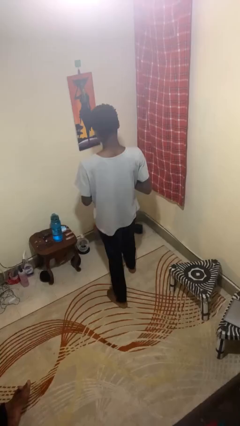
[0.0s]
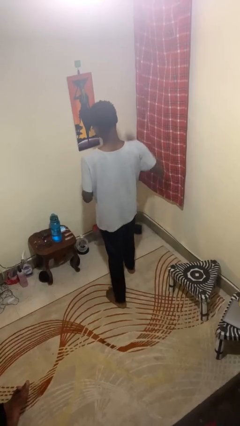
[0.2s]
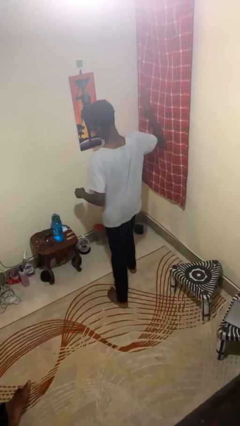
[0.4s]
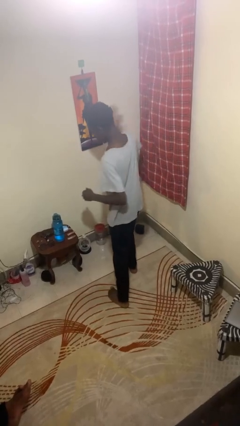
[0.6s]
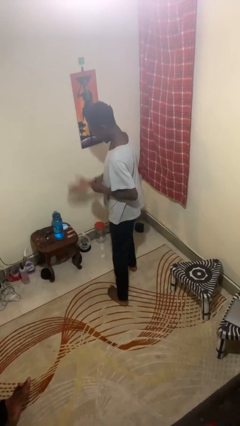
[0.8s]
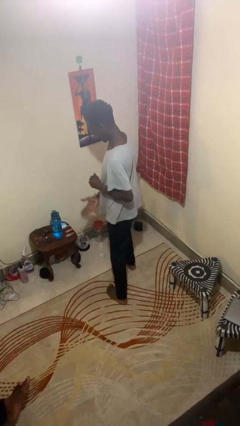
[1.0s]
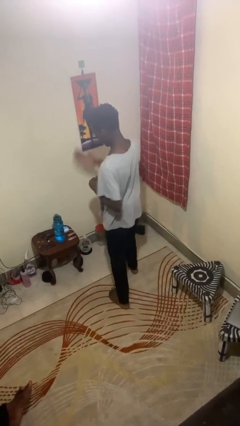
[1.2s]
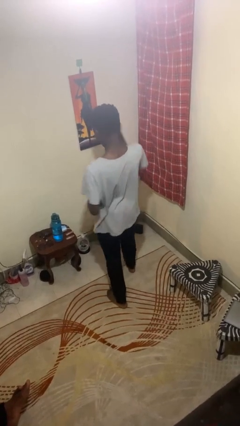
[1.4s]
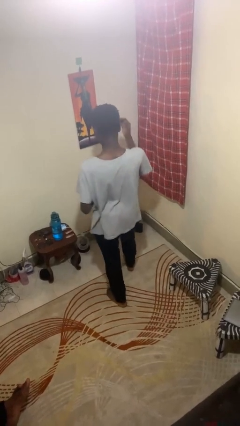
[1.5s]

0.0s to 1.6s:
person karate chop

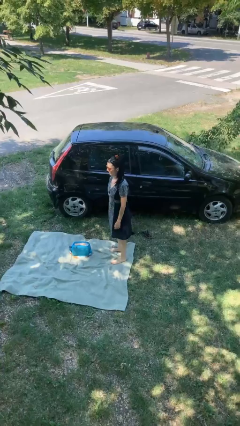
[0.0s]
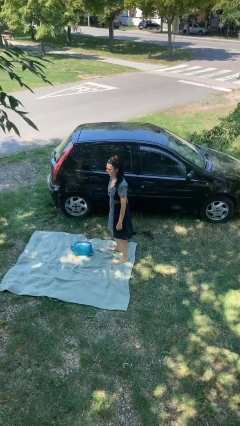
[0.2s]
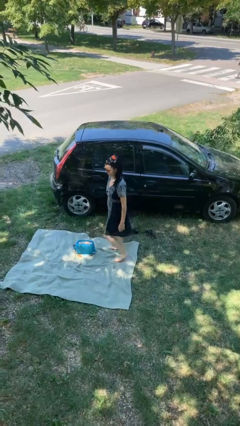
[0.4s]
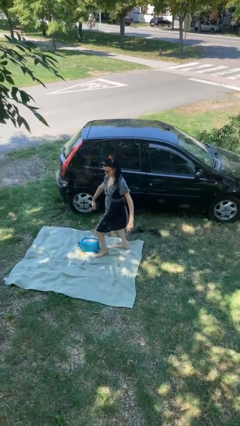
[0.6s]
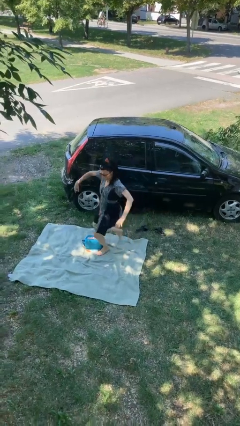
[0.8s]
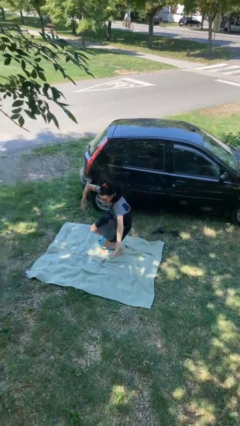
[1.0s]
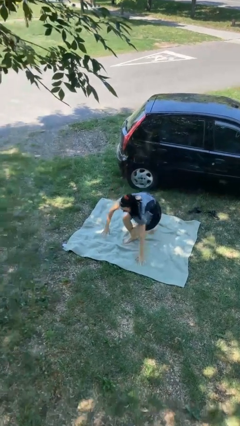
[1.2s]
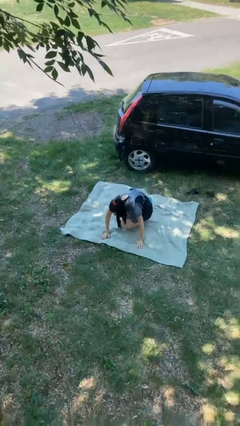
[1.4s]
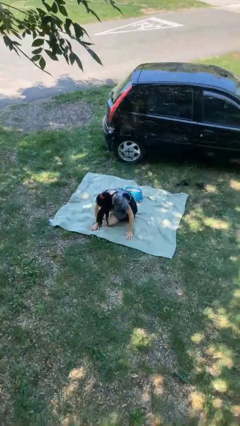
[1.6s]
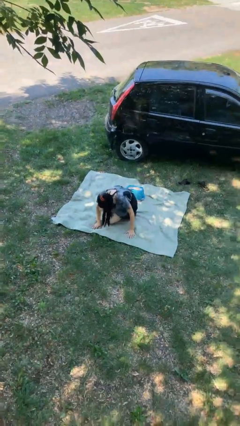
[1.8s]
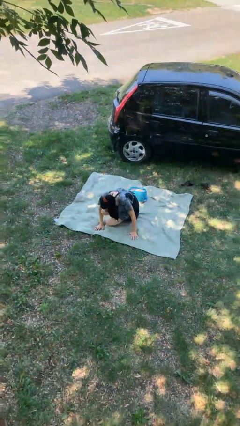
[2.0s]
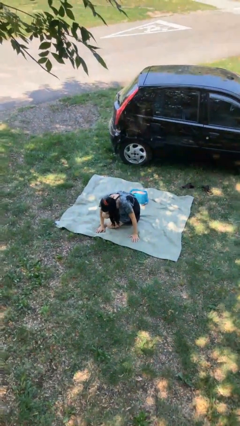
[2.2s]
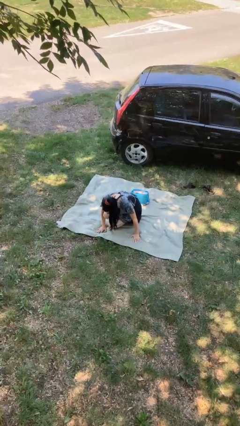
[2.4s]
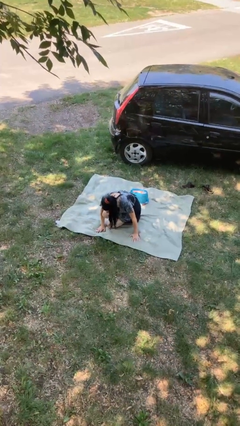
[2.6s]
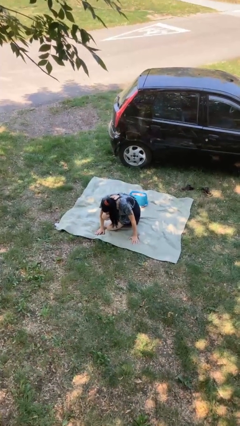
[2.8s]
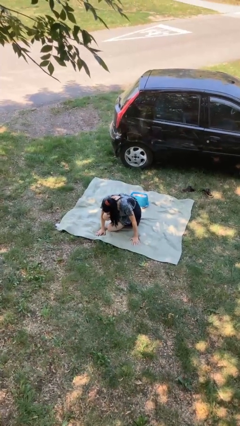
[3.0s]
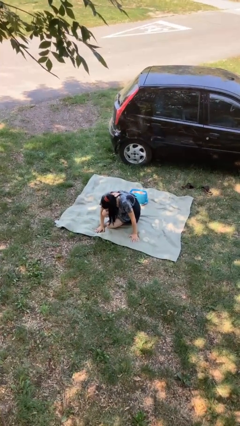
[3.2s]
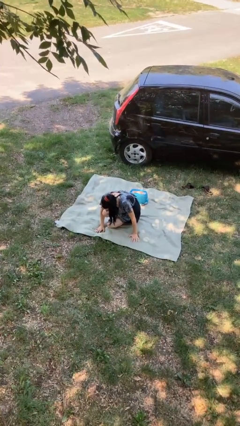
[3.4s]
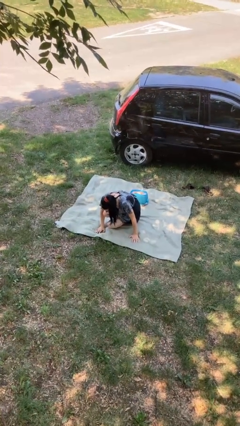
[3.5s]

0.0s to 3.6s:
person trips on object on floor

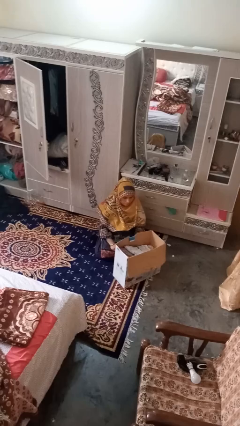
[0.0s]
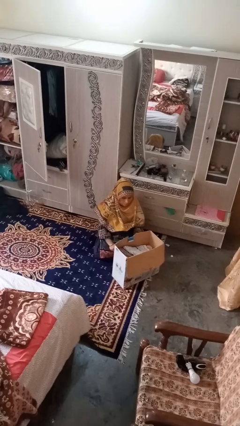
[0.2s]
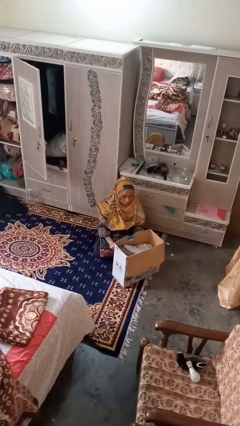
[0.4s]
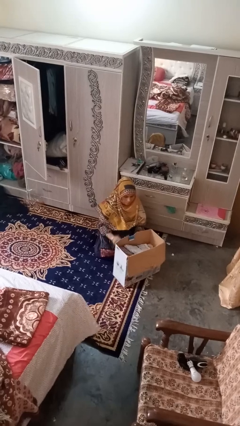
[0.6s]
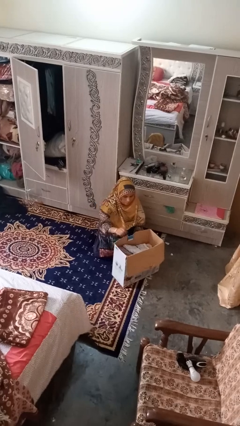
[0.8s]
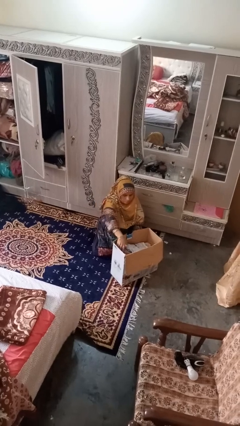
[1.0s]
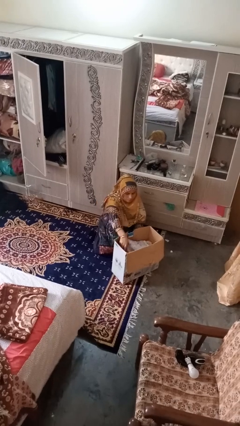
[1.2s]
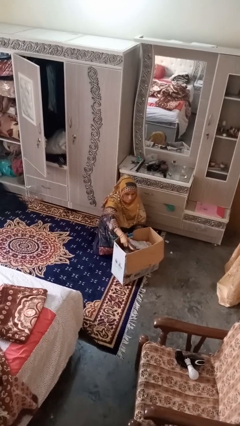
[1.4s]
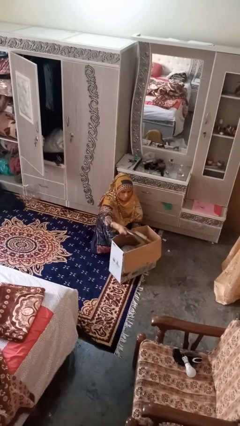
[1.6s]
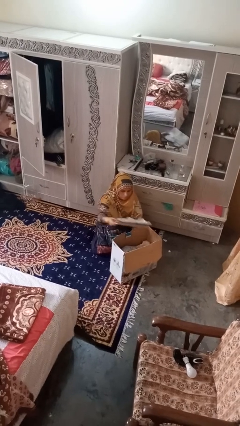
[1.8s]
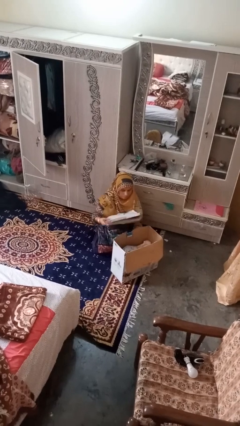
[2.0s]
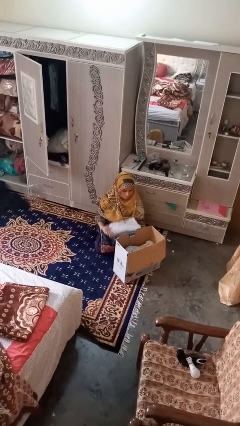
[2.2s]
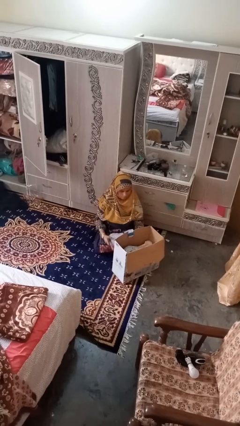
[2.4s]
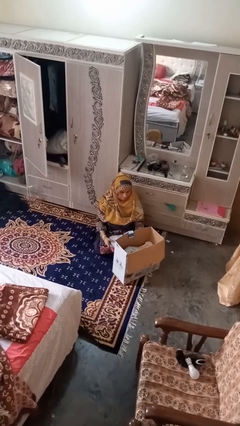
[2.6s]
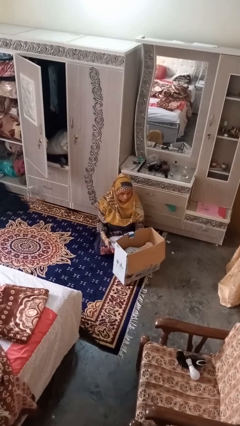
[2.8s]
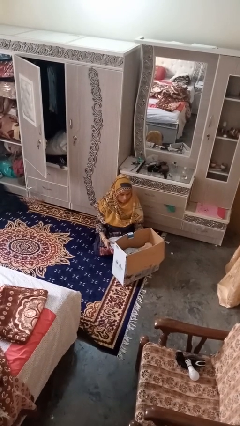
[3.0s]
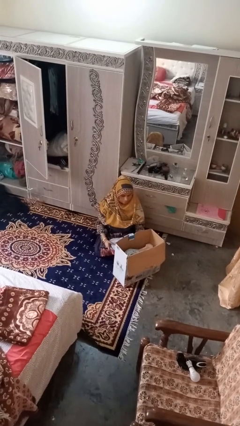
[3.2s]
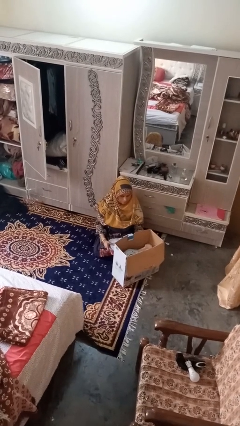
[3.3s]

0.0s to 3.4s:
person takes object from box

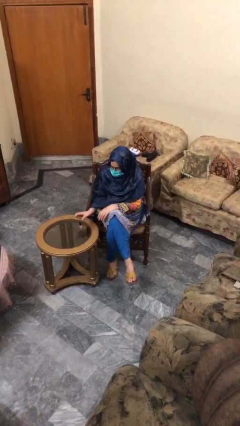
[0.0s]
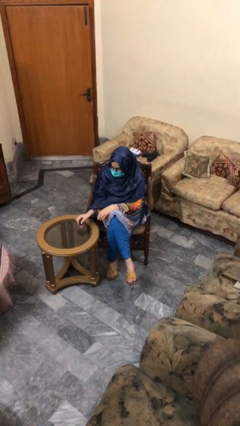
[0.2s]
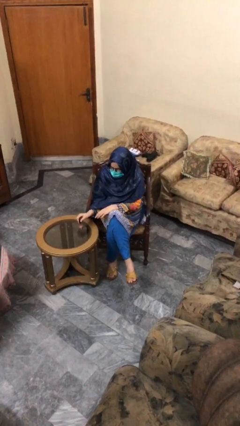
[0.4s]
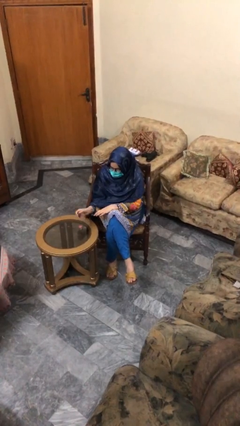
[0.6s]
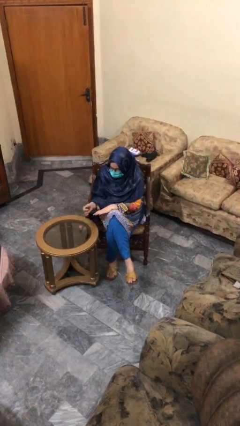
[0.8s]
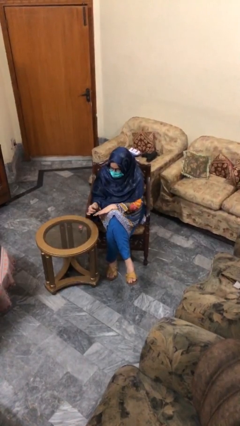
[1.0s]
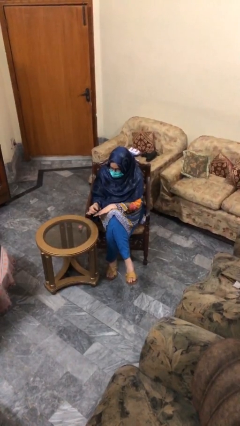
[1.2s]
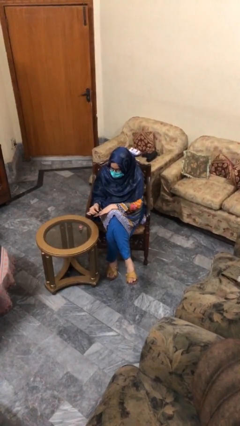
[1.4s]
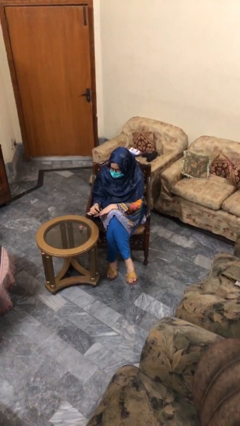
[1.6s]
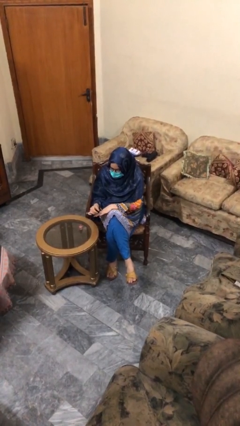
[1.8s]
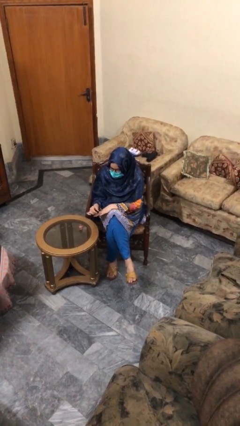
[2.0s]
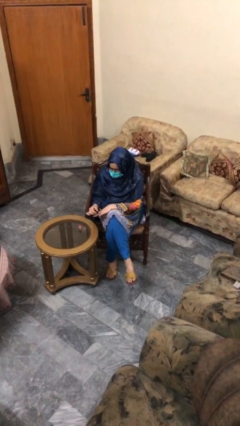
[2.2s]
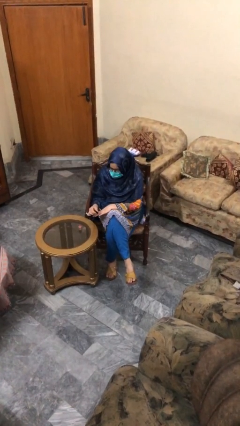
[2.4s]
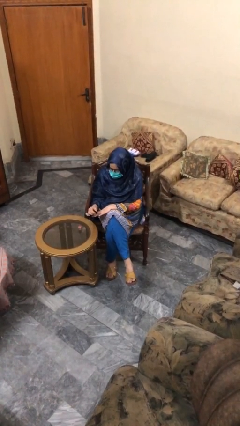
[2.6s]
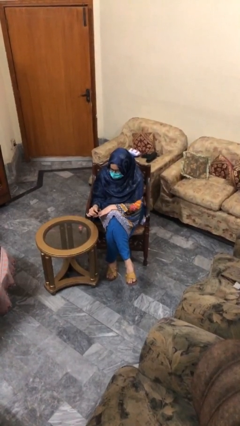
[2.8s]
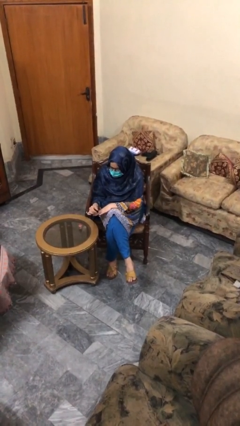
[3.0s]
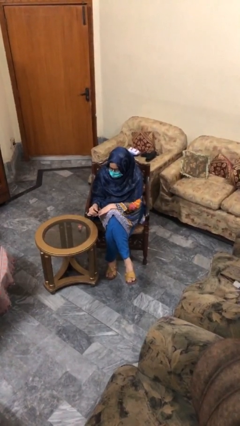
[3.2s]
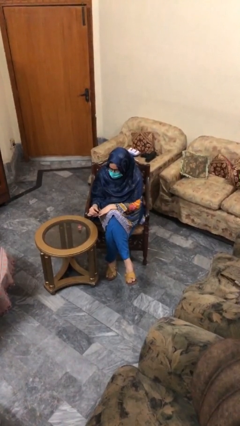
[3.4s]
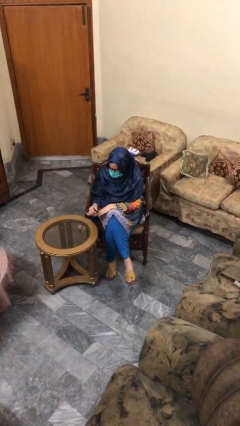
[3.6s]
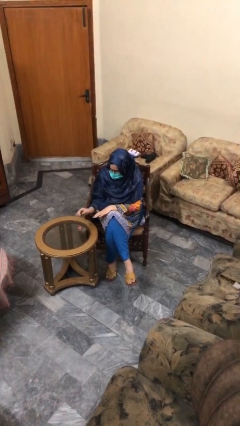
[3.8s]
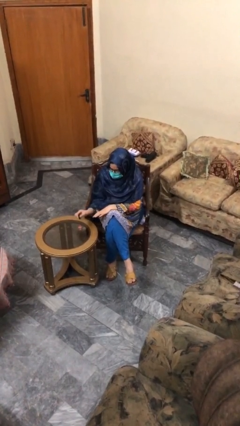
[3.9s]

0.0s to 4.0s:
person paints fingernails

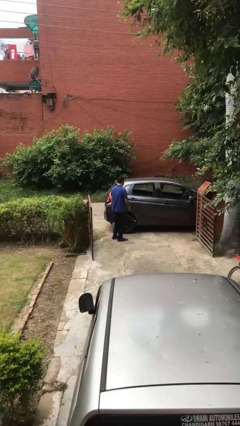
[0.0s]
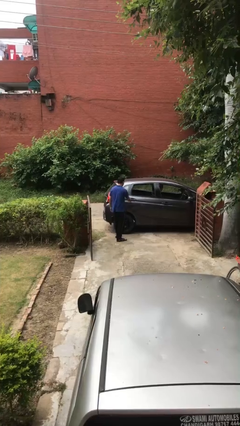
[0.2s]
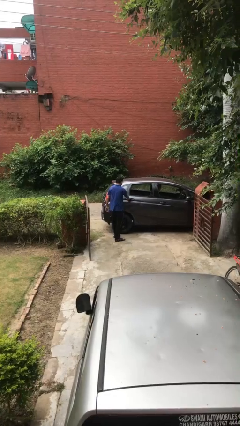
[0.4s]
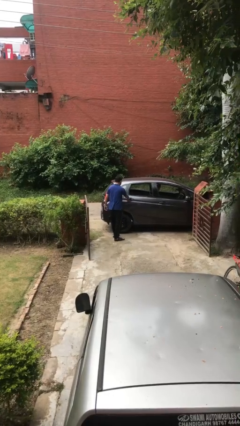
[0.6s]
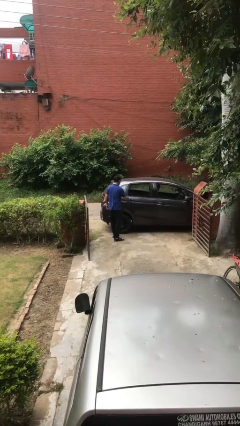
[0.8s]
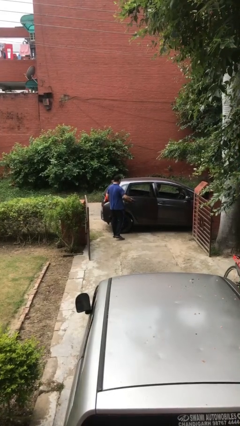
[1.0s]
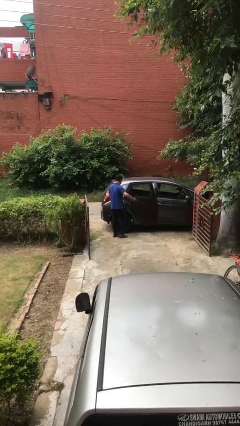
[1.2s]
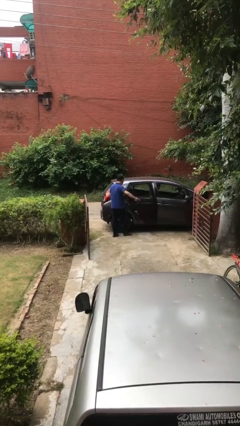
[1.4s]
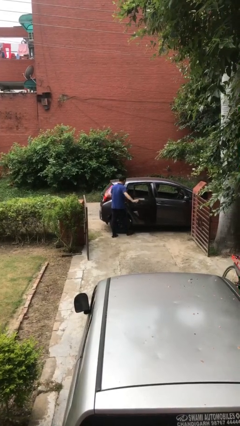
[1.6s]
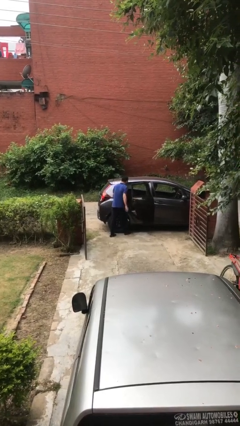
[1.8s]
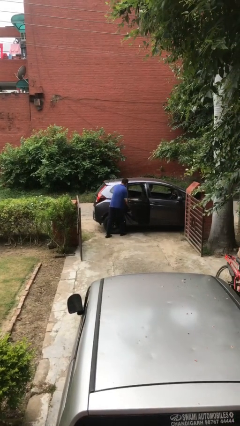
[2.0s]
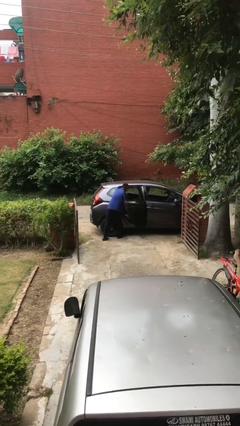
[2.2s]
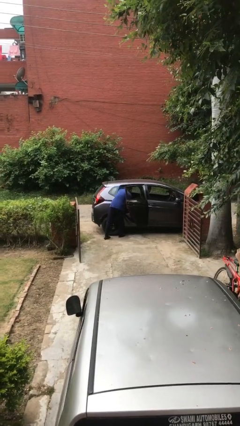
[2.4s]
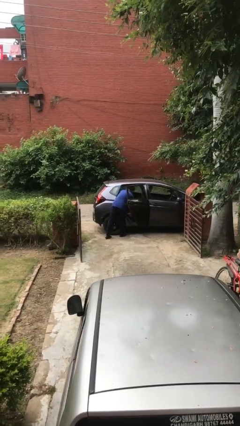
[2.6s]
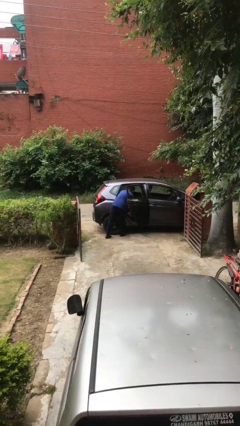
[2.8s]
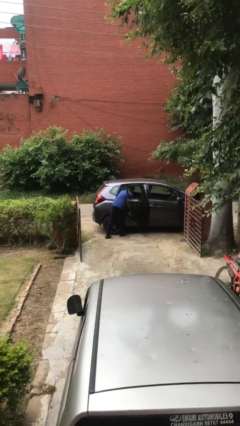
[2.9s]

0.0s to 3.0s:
person opens car door

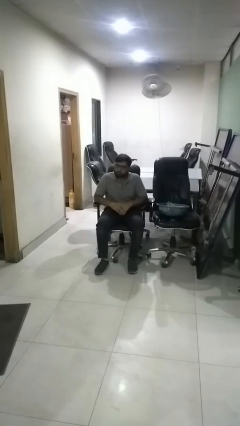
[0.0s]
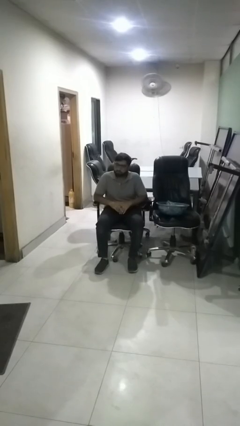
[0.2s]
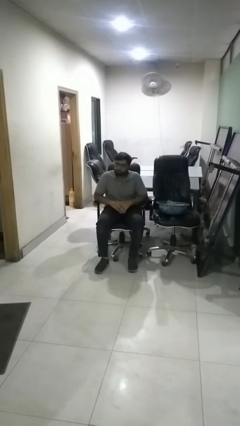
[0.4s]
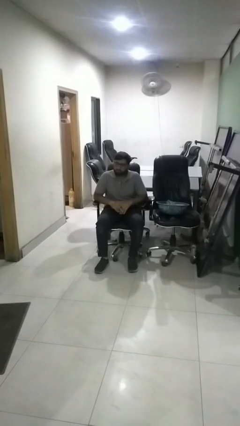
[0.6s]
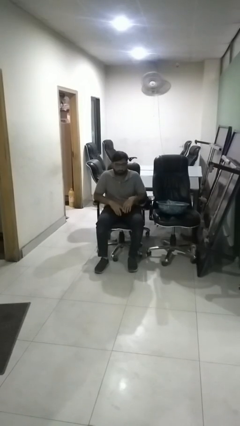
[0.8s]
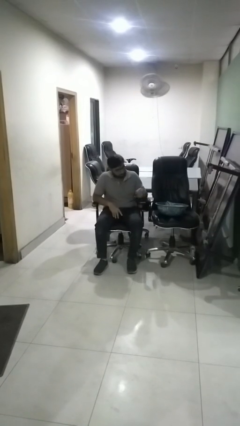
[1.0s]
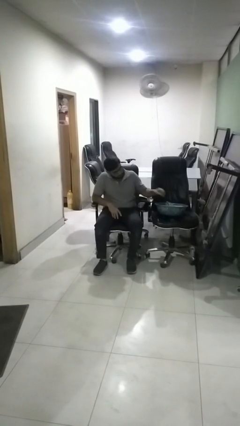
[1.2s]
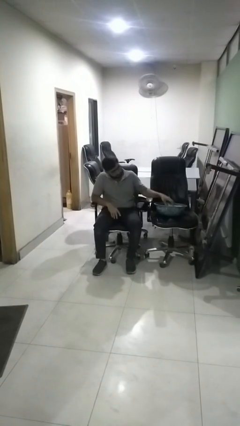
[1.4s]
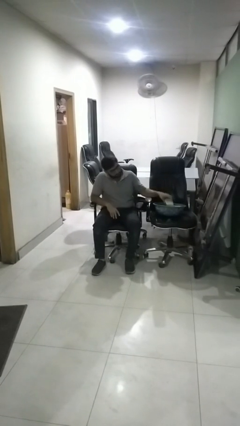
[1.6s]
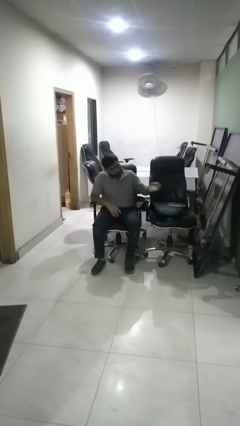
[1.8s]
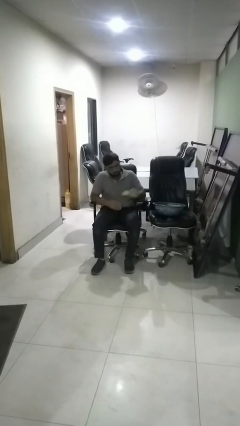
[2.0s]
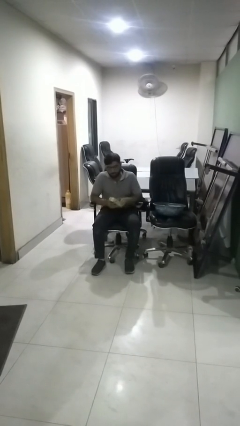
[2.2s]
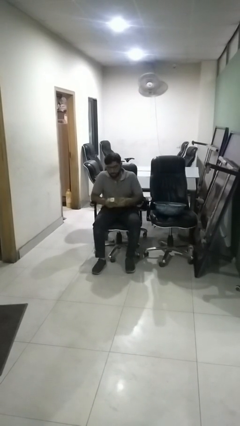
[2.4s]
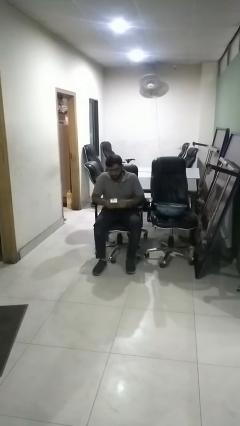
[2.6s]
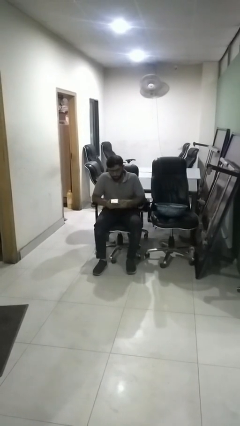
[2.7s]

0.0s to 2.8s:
person takes object from basket
